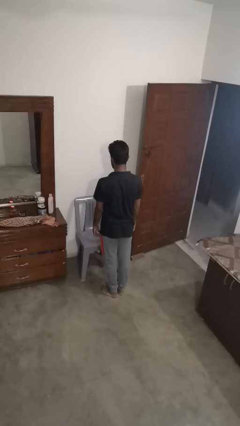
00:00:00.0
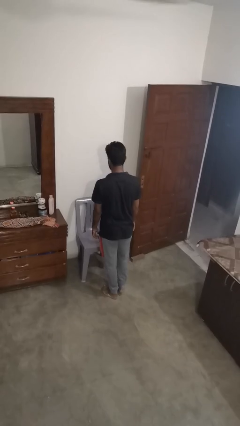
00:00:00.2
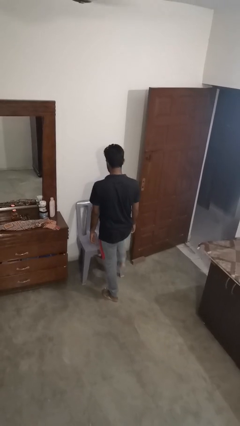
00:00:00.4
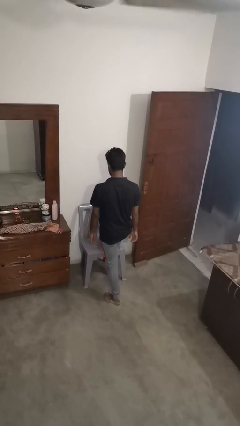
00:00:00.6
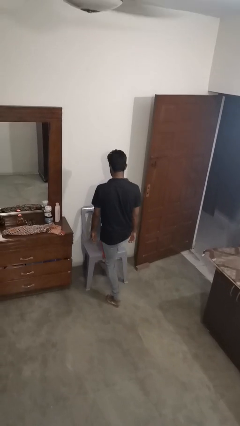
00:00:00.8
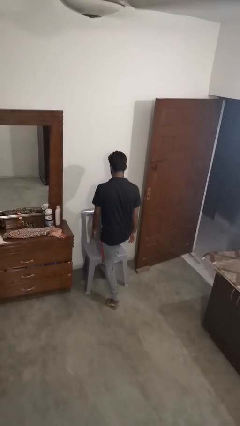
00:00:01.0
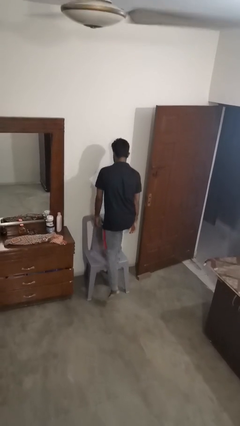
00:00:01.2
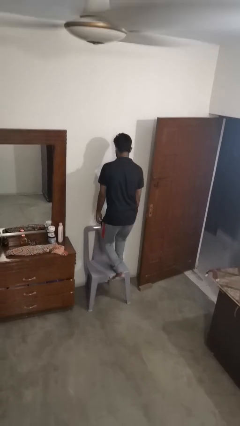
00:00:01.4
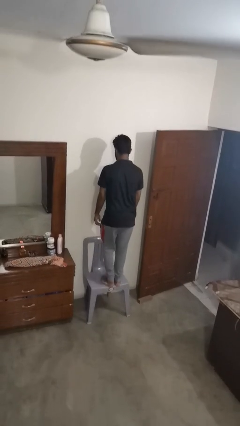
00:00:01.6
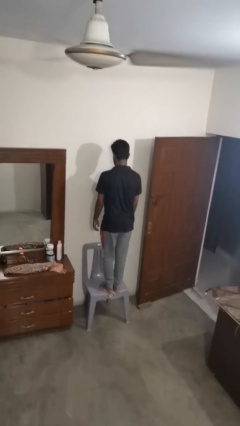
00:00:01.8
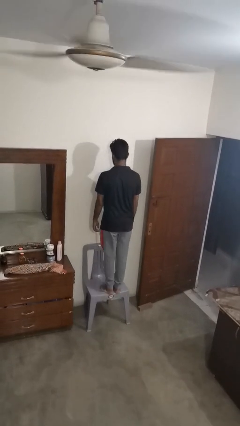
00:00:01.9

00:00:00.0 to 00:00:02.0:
person climbs on chair

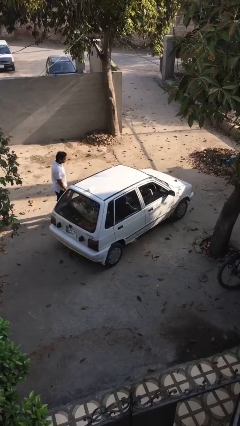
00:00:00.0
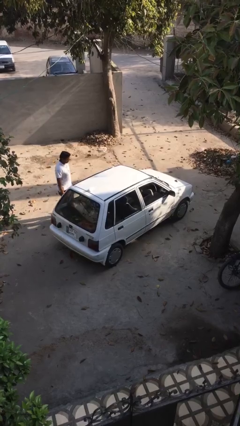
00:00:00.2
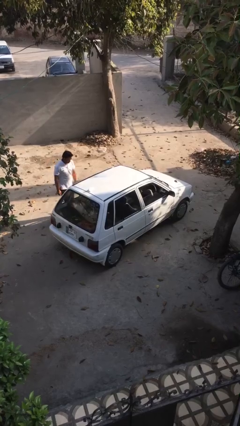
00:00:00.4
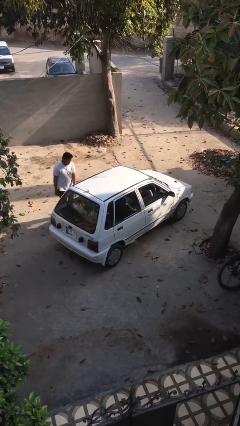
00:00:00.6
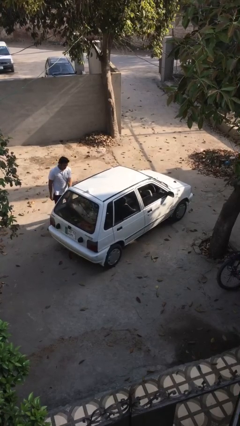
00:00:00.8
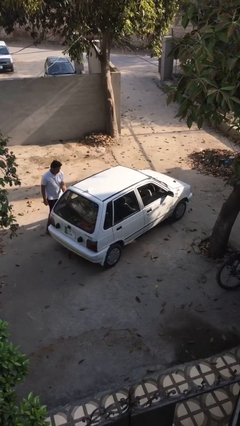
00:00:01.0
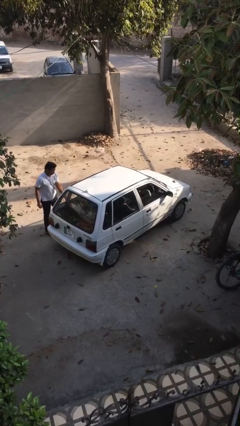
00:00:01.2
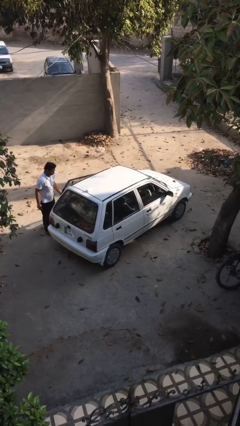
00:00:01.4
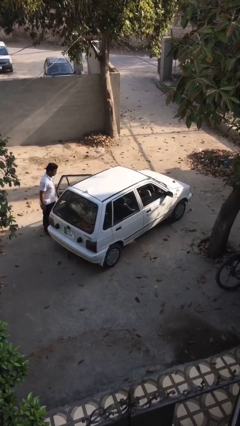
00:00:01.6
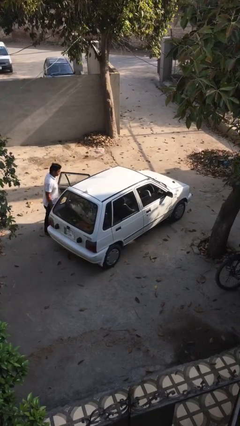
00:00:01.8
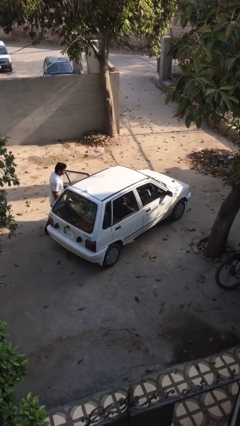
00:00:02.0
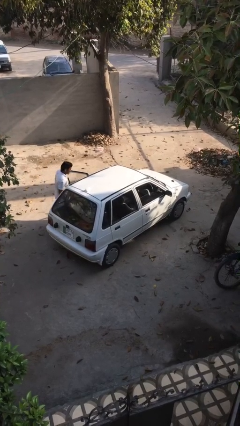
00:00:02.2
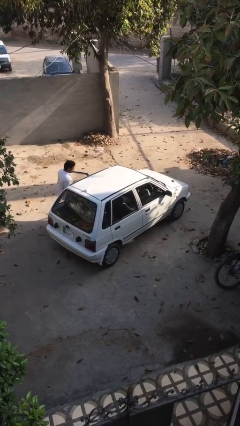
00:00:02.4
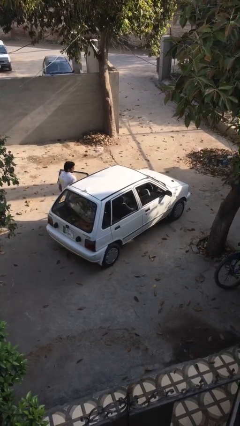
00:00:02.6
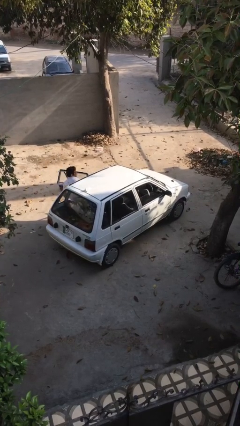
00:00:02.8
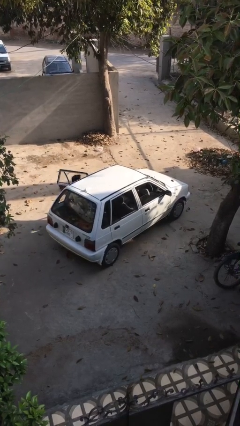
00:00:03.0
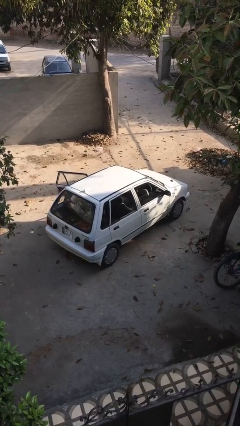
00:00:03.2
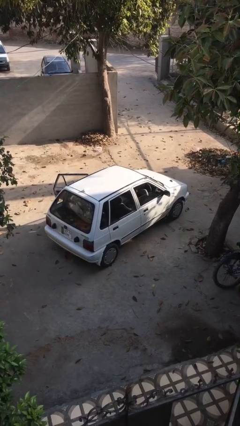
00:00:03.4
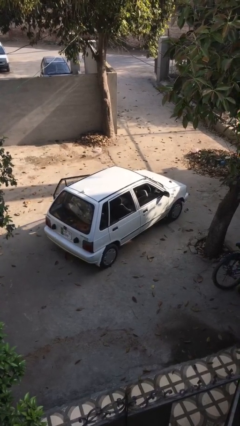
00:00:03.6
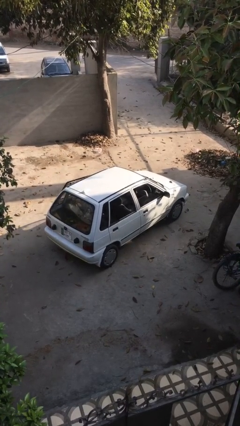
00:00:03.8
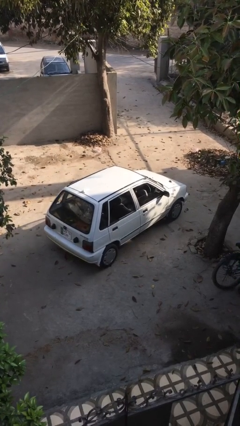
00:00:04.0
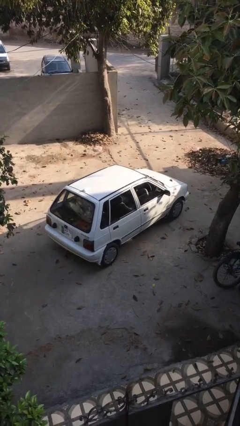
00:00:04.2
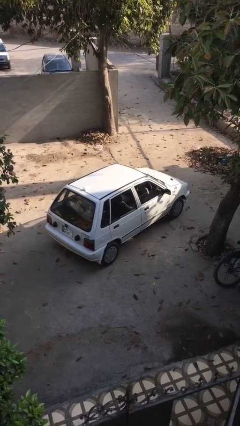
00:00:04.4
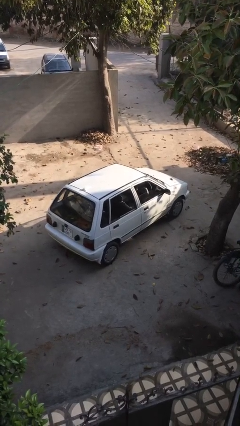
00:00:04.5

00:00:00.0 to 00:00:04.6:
car picks up person

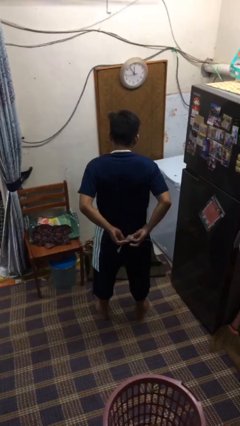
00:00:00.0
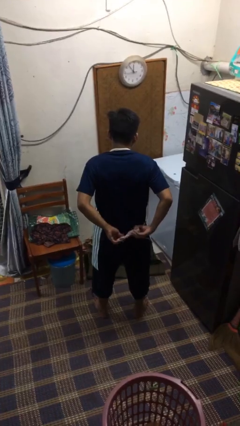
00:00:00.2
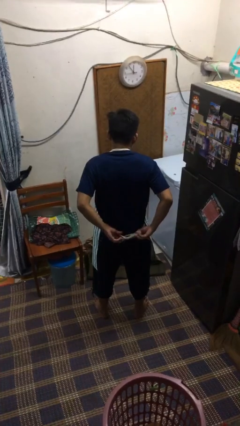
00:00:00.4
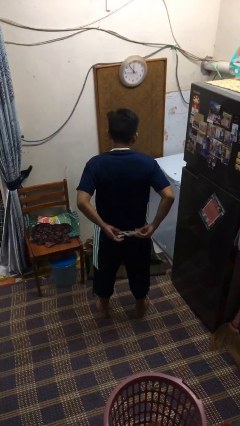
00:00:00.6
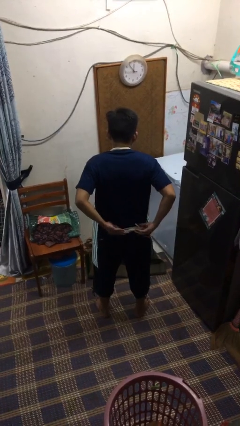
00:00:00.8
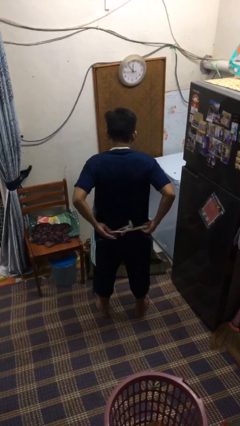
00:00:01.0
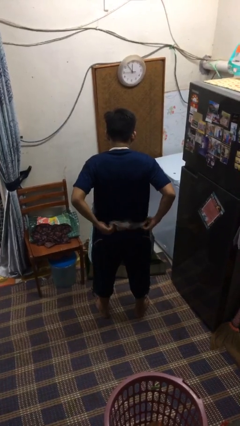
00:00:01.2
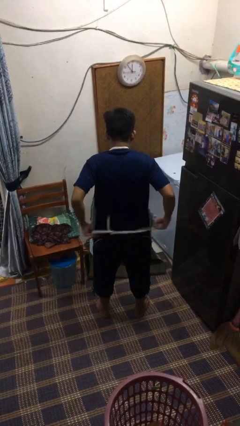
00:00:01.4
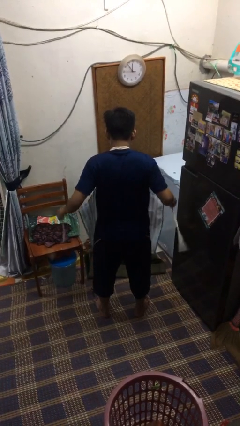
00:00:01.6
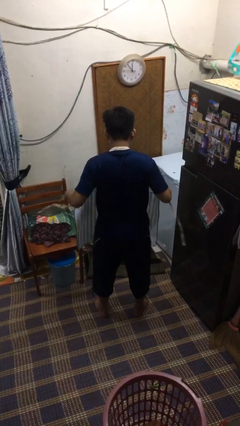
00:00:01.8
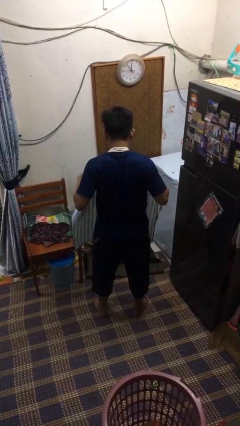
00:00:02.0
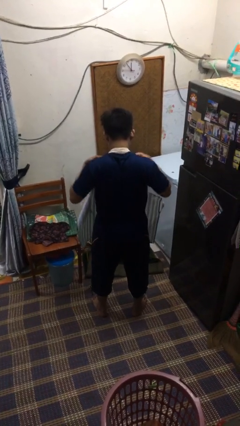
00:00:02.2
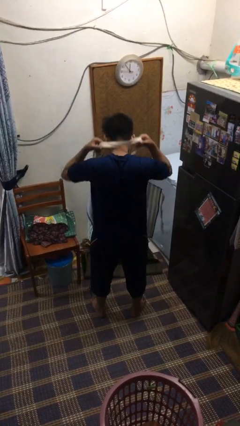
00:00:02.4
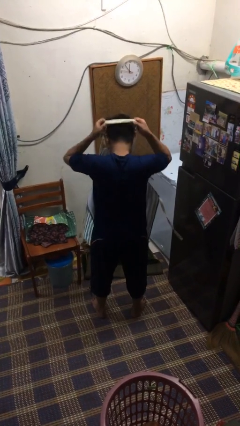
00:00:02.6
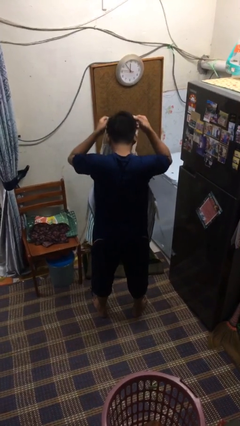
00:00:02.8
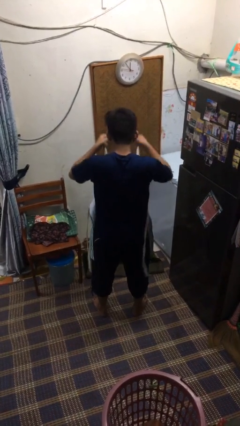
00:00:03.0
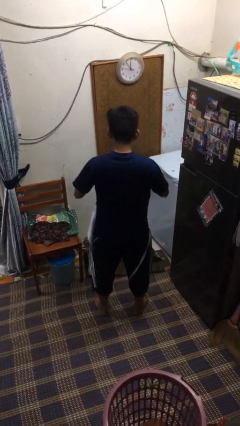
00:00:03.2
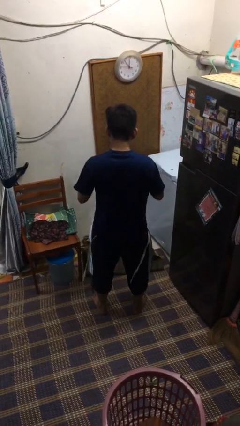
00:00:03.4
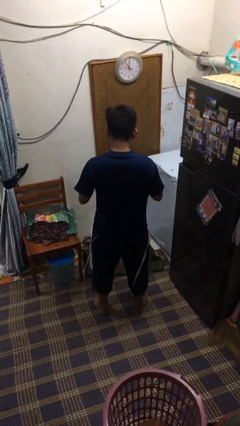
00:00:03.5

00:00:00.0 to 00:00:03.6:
person takes off apron

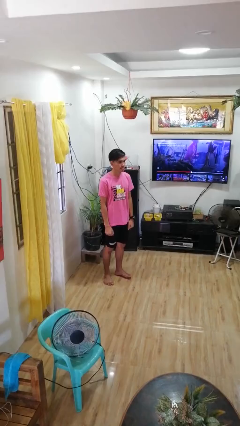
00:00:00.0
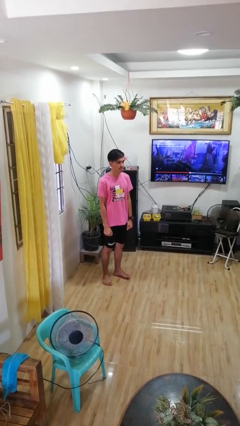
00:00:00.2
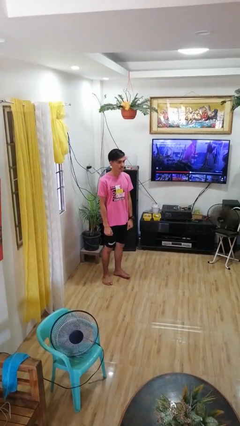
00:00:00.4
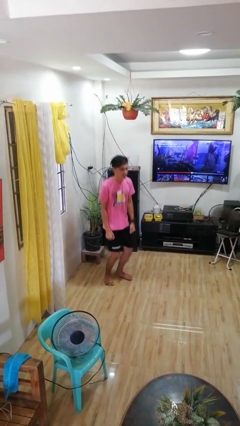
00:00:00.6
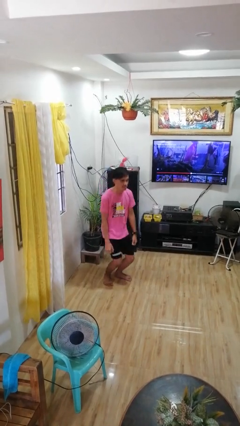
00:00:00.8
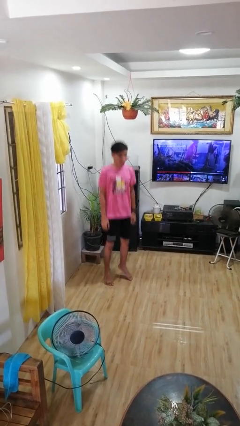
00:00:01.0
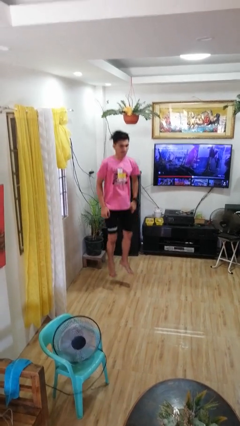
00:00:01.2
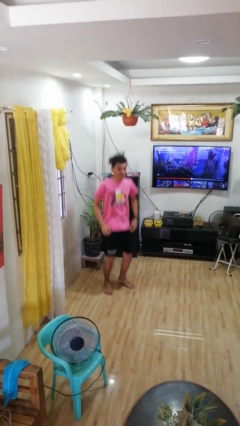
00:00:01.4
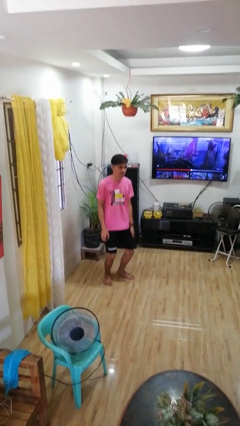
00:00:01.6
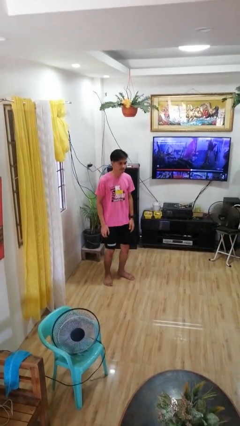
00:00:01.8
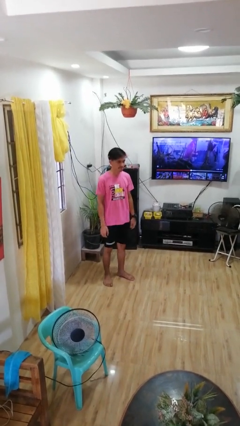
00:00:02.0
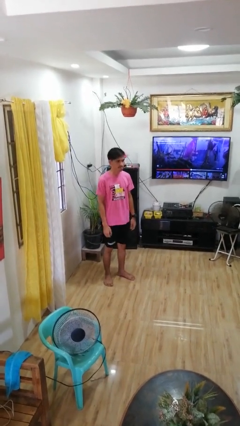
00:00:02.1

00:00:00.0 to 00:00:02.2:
person jumps

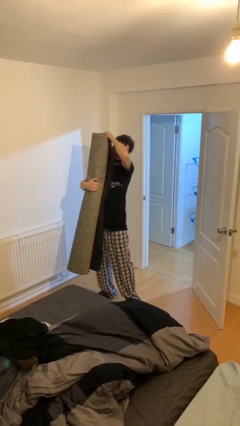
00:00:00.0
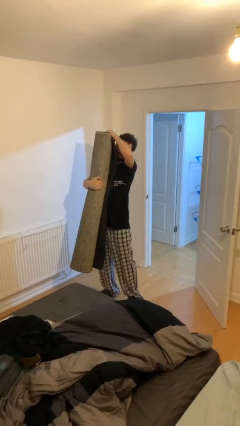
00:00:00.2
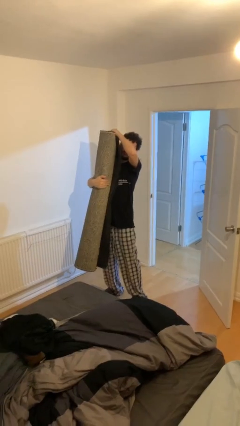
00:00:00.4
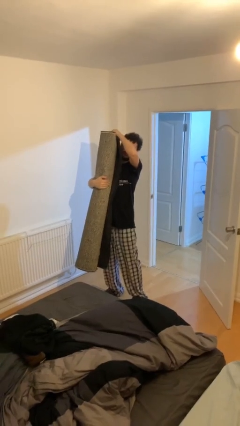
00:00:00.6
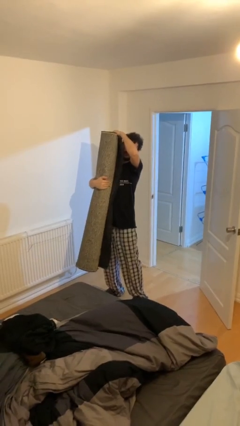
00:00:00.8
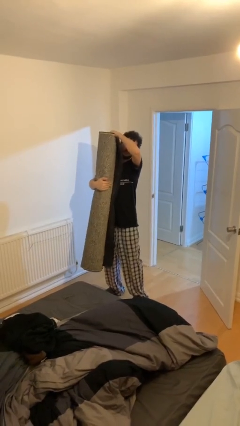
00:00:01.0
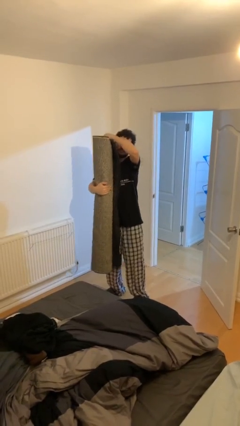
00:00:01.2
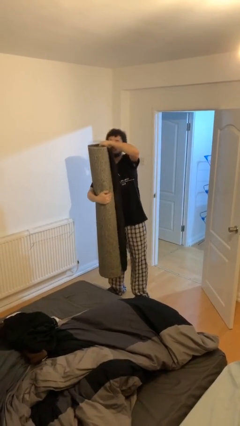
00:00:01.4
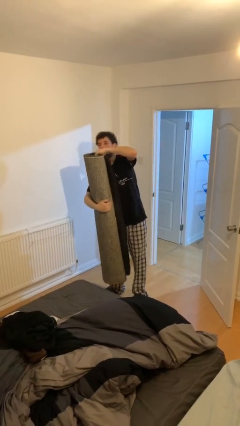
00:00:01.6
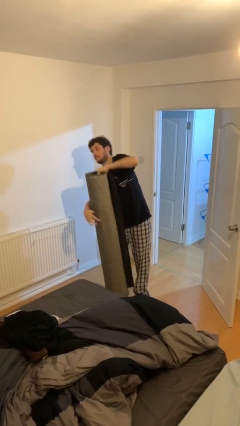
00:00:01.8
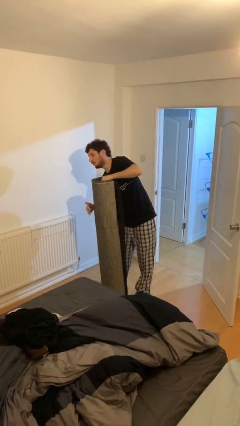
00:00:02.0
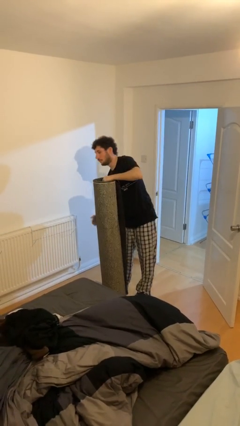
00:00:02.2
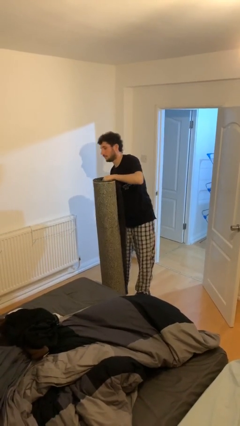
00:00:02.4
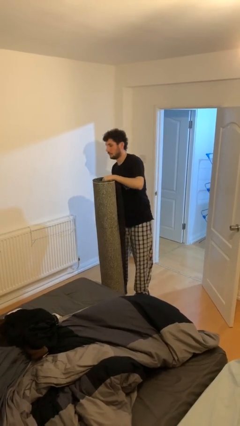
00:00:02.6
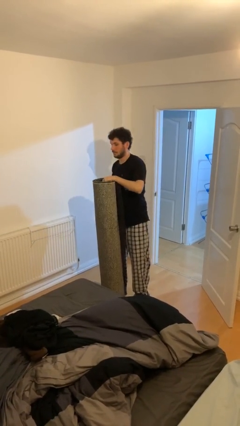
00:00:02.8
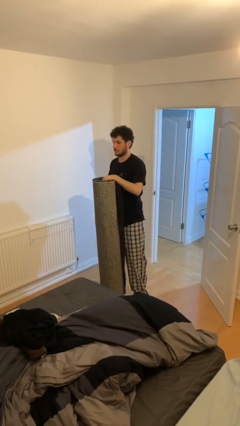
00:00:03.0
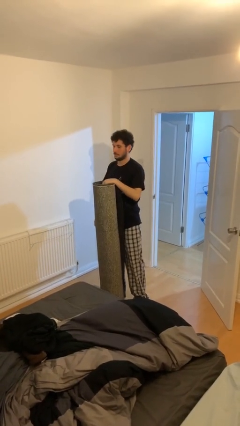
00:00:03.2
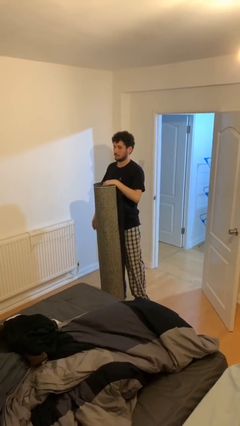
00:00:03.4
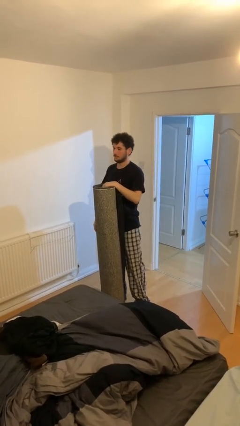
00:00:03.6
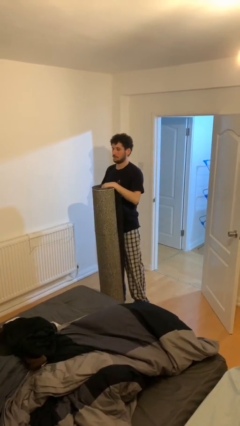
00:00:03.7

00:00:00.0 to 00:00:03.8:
person puts down object on floor

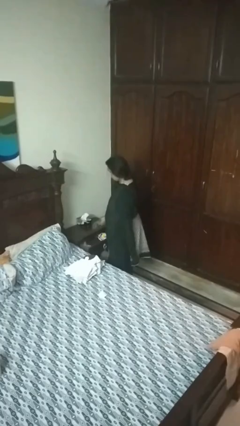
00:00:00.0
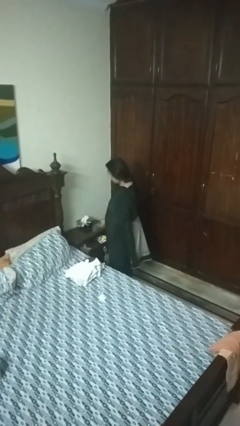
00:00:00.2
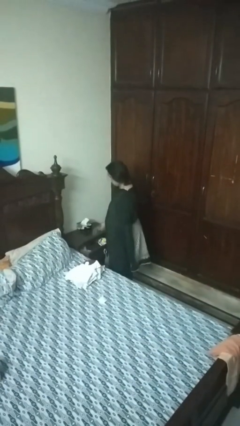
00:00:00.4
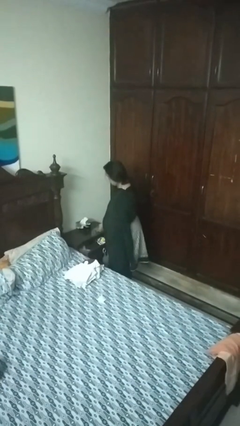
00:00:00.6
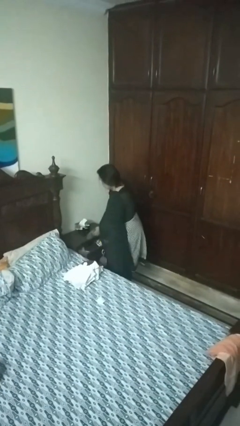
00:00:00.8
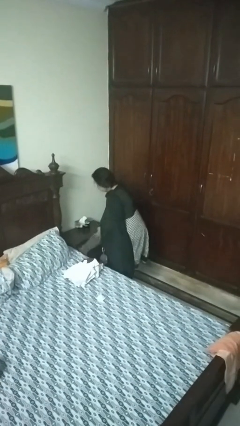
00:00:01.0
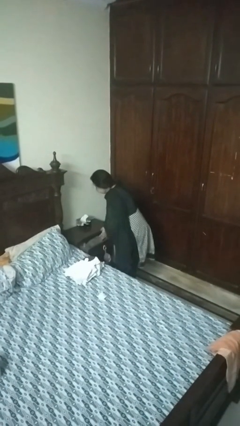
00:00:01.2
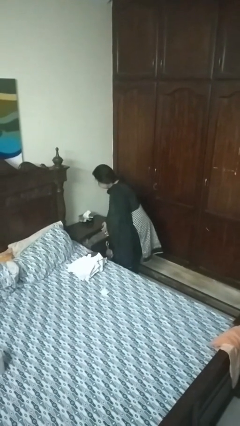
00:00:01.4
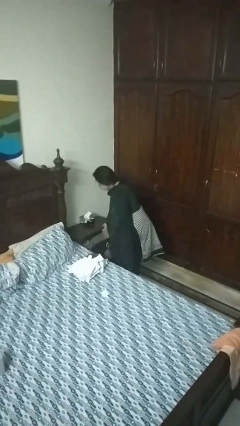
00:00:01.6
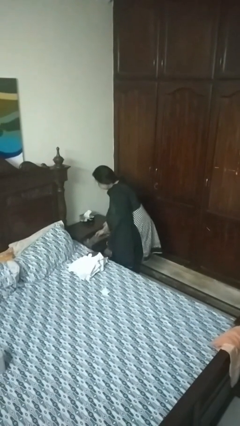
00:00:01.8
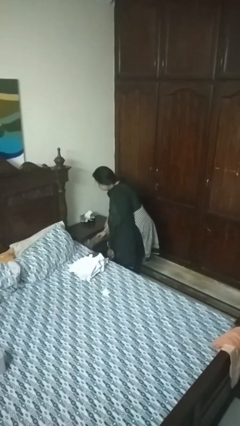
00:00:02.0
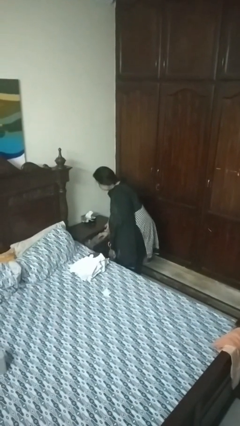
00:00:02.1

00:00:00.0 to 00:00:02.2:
person puts clothes into dresser
